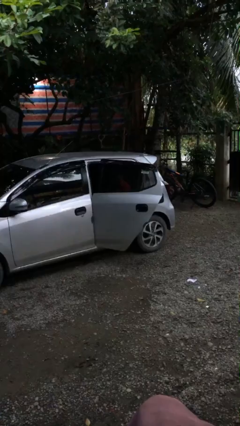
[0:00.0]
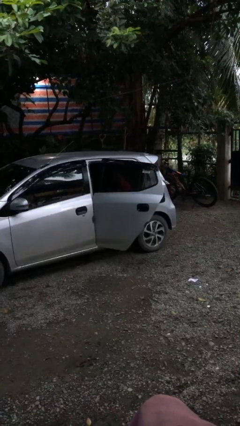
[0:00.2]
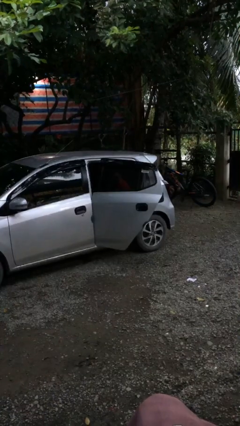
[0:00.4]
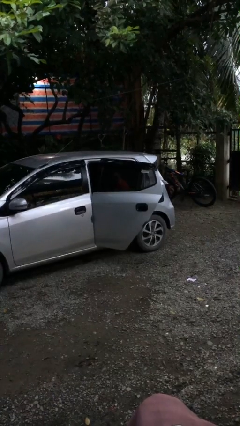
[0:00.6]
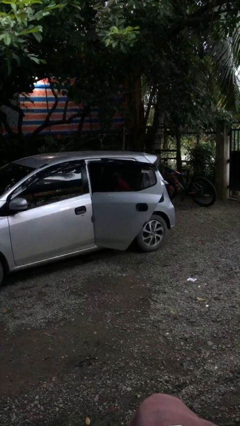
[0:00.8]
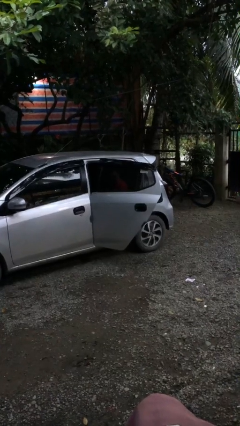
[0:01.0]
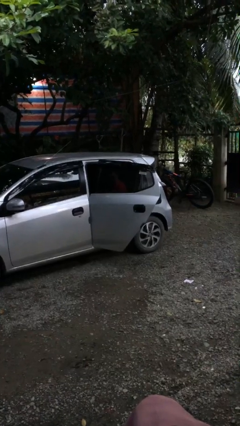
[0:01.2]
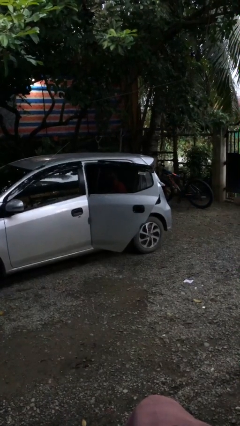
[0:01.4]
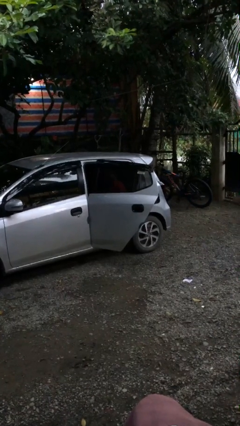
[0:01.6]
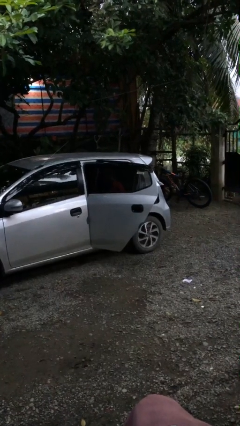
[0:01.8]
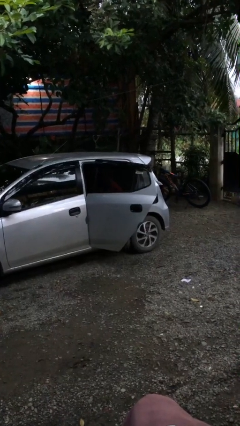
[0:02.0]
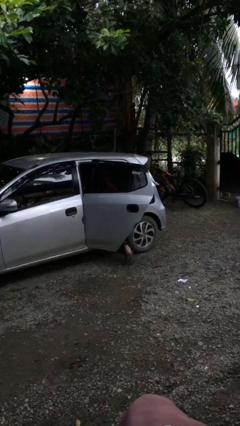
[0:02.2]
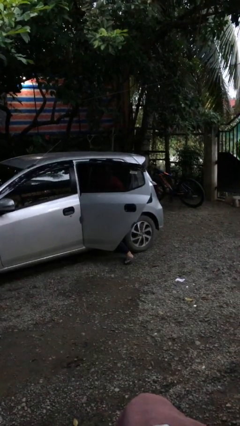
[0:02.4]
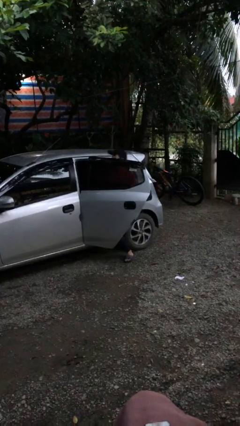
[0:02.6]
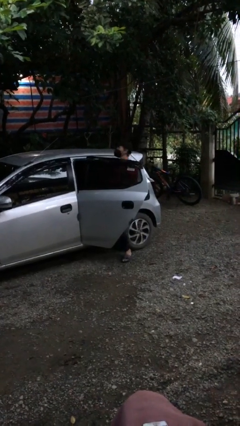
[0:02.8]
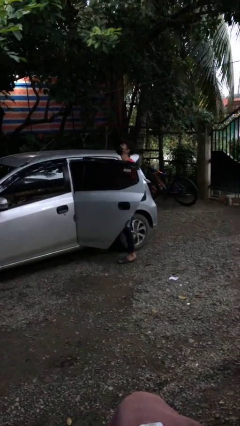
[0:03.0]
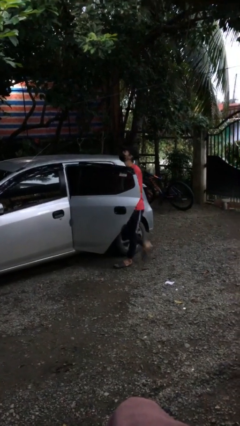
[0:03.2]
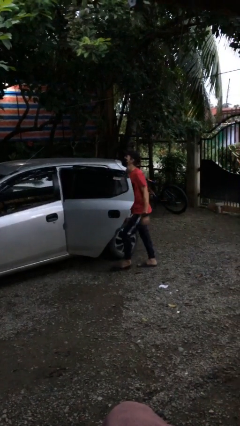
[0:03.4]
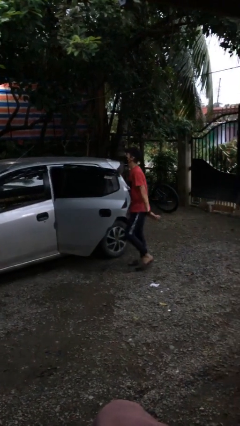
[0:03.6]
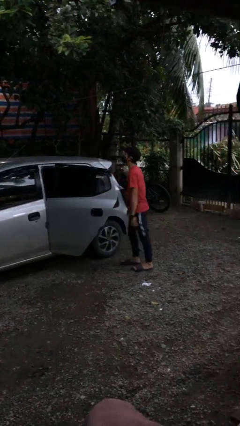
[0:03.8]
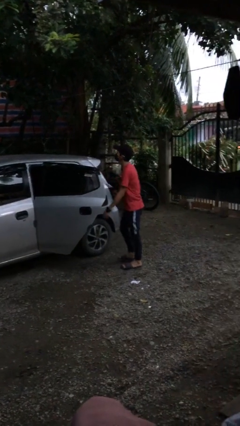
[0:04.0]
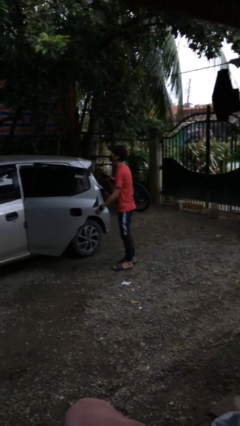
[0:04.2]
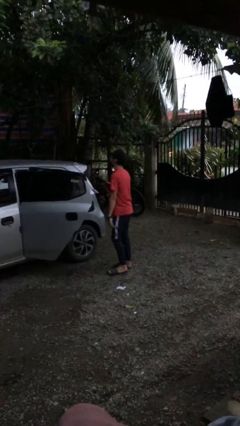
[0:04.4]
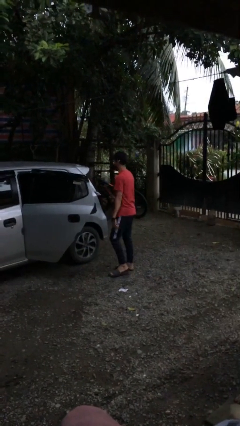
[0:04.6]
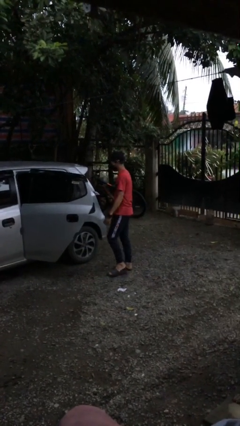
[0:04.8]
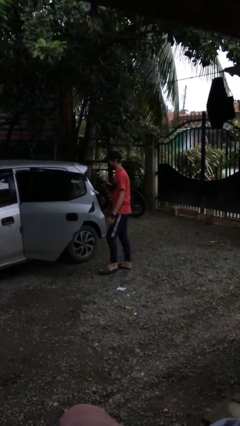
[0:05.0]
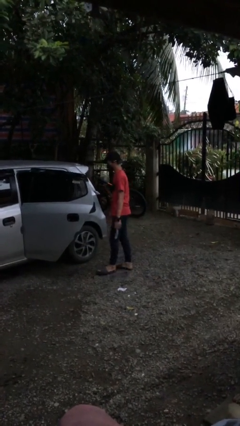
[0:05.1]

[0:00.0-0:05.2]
person exits car

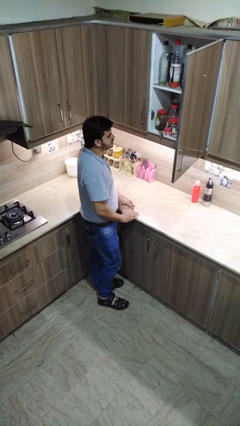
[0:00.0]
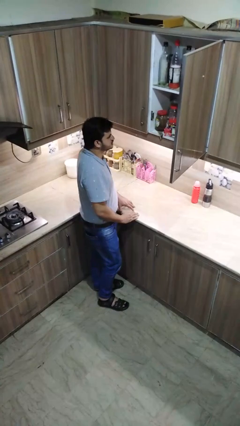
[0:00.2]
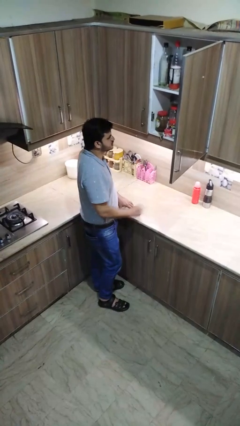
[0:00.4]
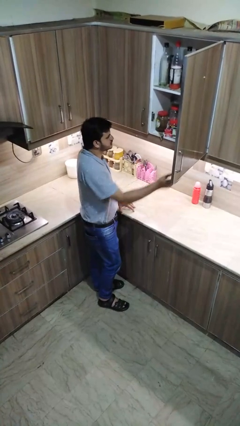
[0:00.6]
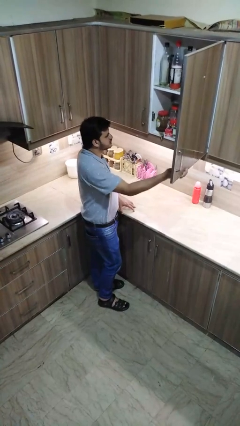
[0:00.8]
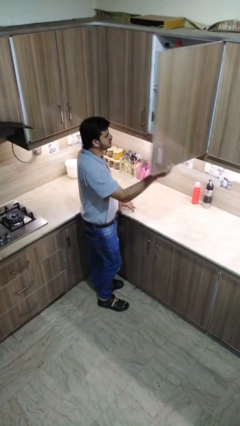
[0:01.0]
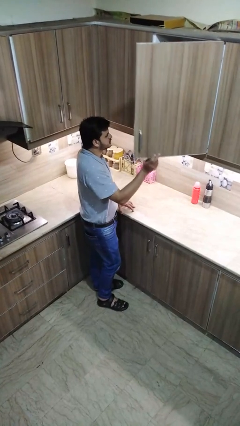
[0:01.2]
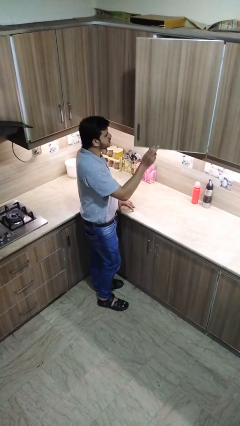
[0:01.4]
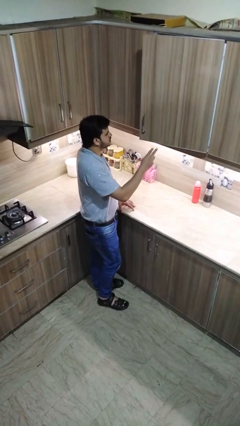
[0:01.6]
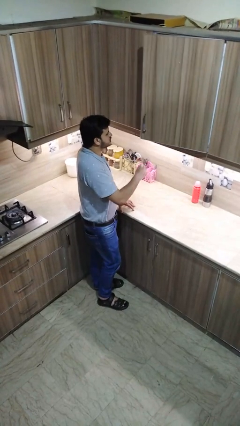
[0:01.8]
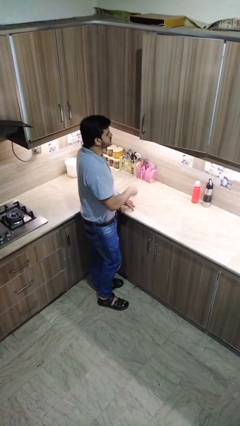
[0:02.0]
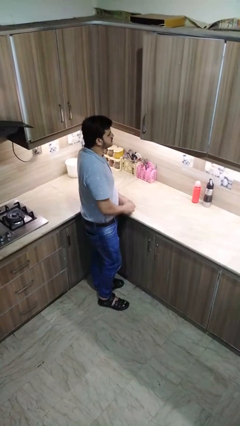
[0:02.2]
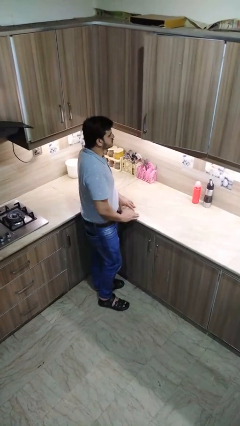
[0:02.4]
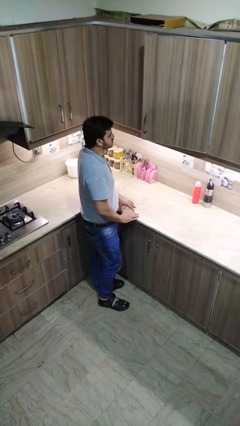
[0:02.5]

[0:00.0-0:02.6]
person closes cabinet

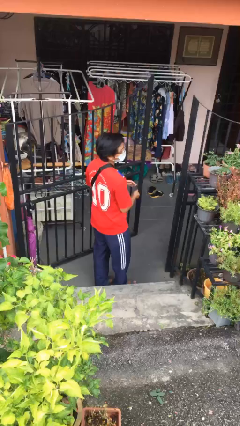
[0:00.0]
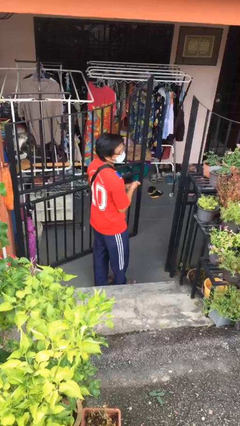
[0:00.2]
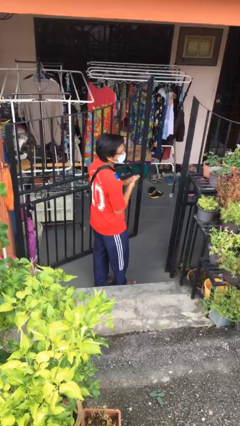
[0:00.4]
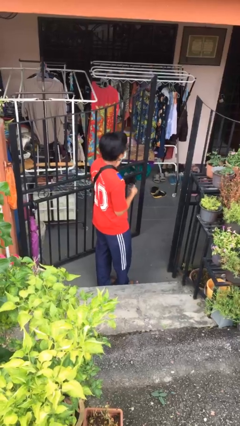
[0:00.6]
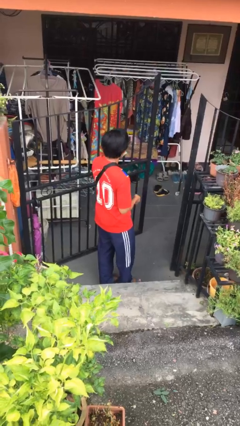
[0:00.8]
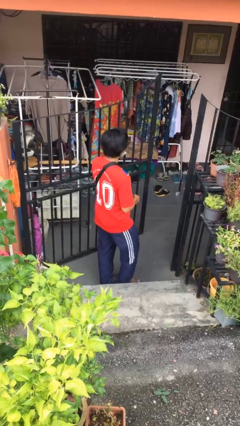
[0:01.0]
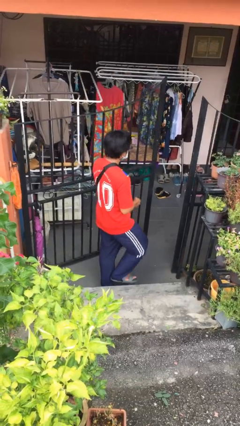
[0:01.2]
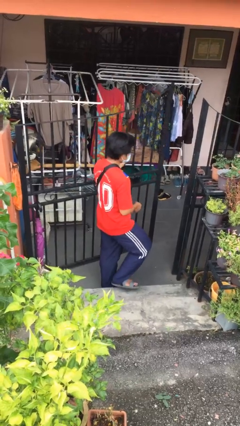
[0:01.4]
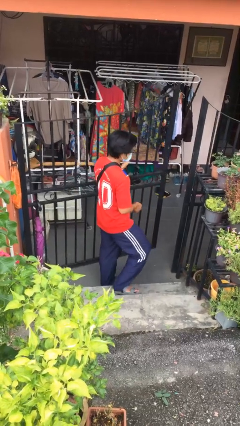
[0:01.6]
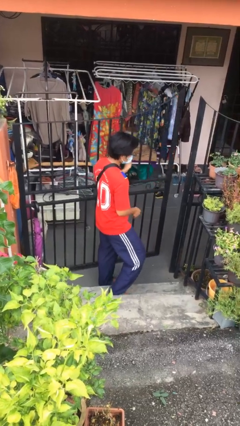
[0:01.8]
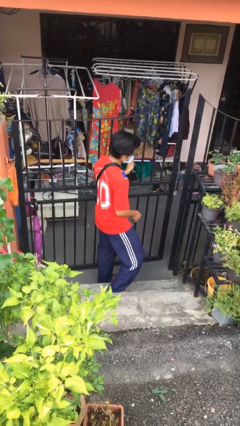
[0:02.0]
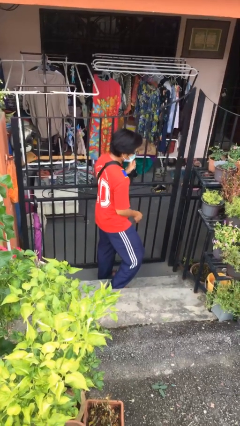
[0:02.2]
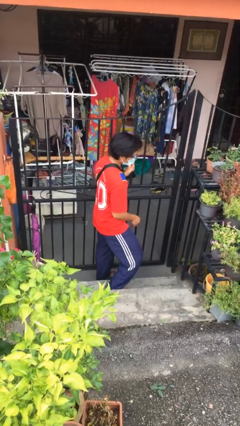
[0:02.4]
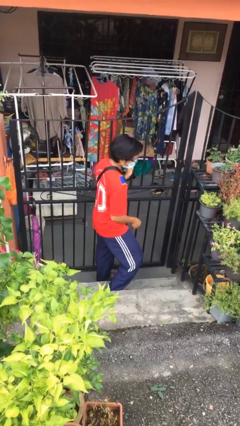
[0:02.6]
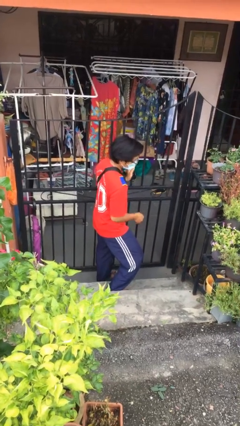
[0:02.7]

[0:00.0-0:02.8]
person closes facility door

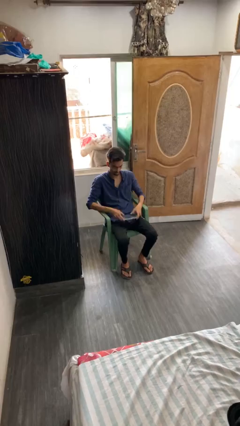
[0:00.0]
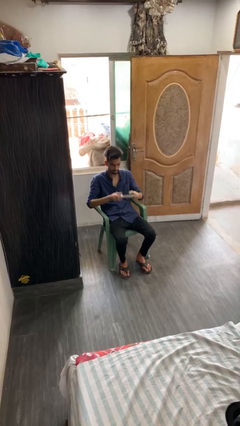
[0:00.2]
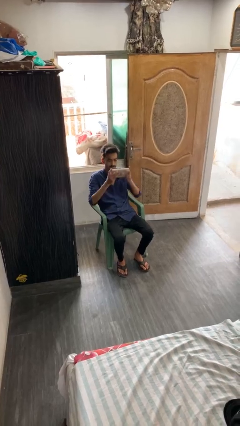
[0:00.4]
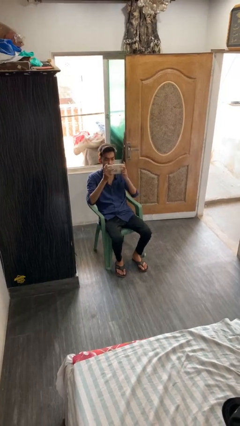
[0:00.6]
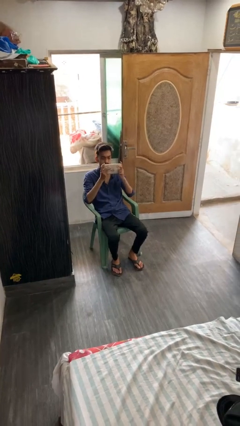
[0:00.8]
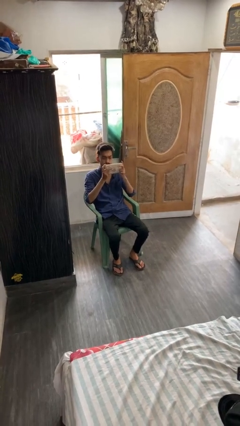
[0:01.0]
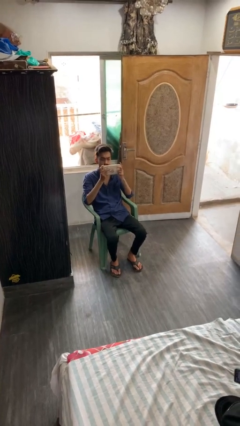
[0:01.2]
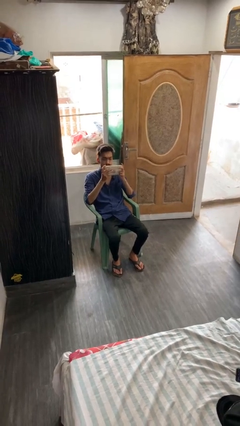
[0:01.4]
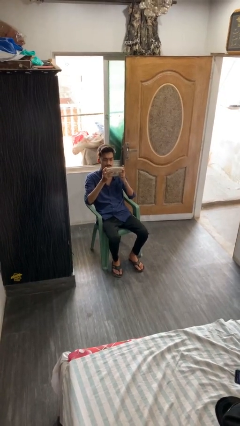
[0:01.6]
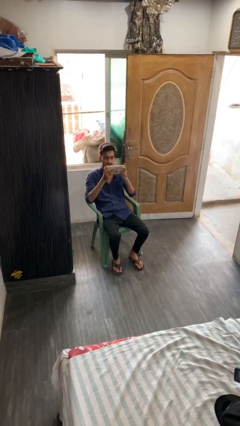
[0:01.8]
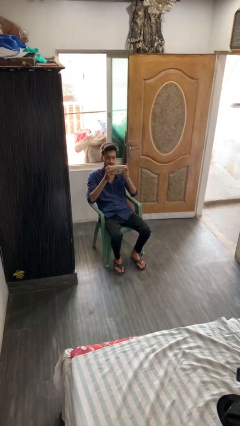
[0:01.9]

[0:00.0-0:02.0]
person interacts with tablet

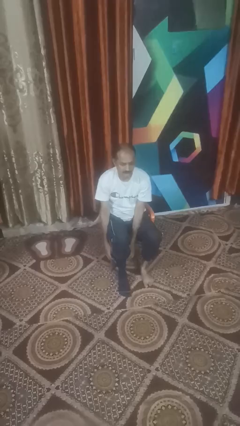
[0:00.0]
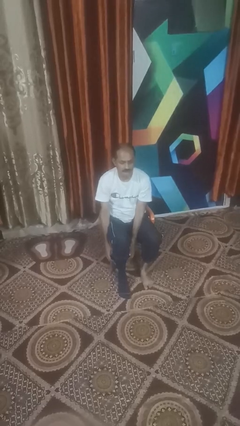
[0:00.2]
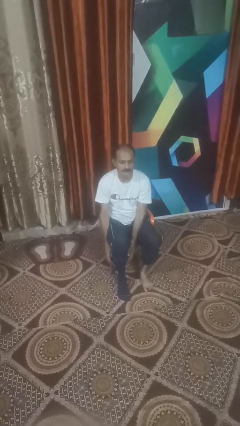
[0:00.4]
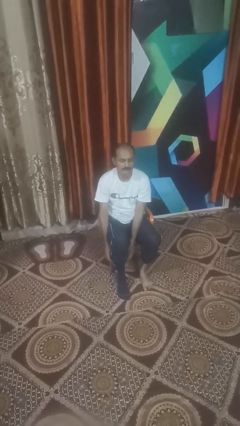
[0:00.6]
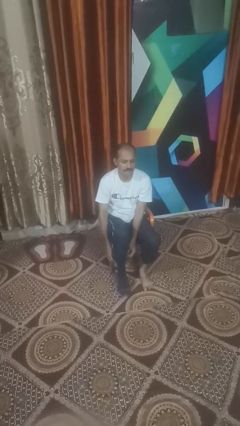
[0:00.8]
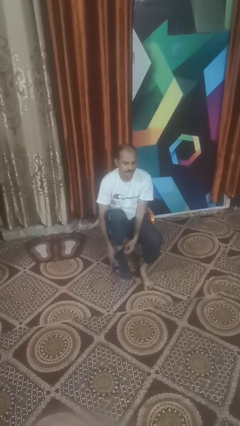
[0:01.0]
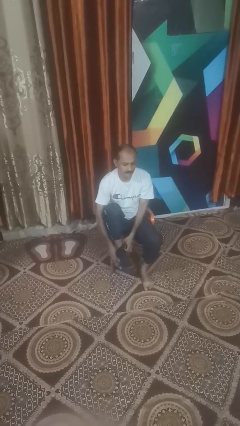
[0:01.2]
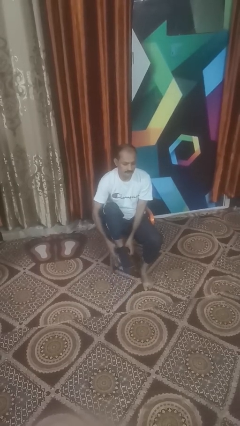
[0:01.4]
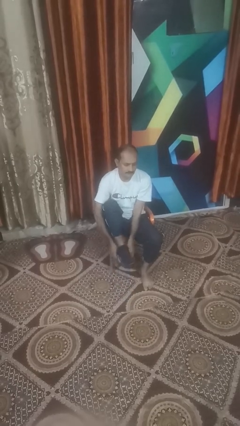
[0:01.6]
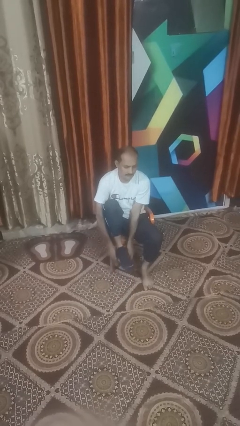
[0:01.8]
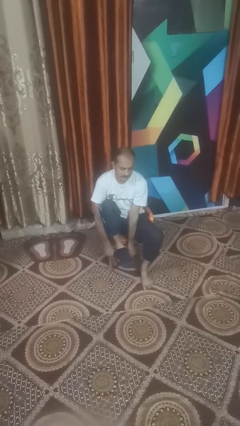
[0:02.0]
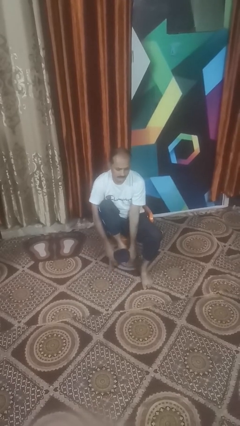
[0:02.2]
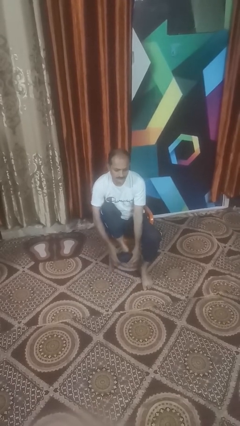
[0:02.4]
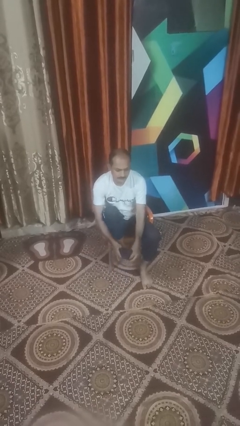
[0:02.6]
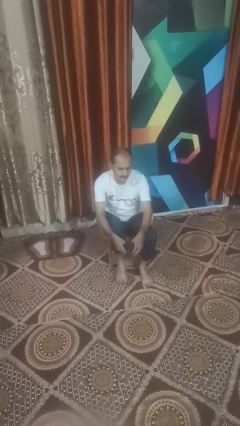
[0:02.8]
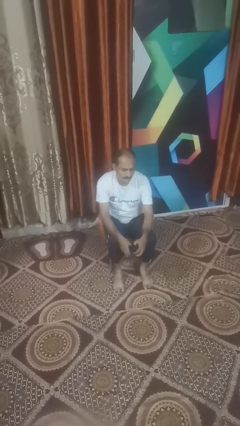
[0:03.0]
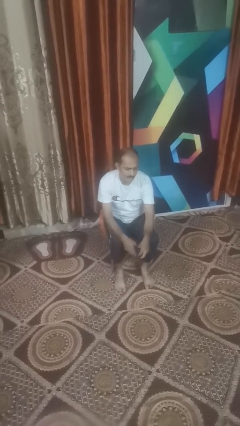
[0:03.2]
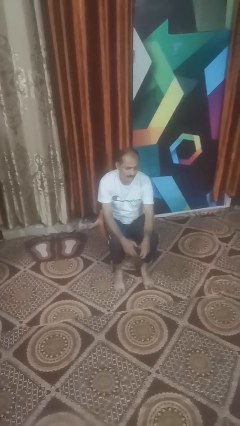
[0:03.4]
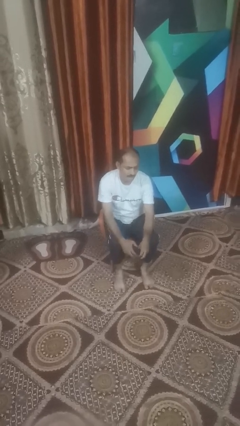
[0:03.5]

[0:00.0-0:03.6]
person takes off socks

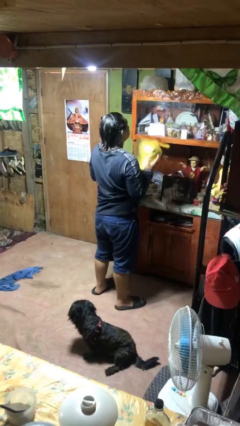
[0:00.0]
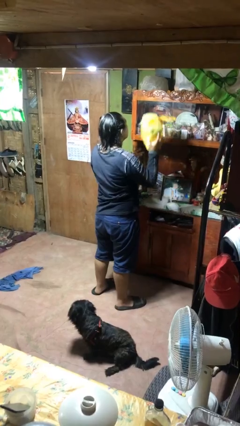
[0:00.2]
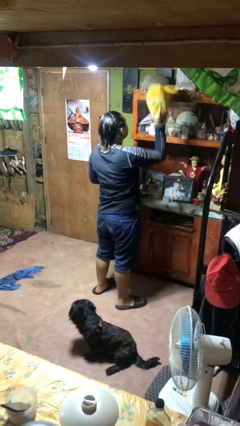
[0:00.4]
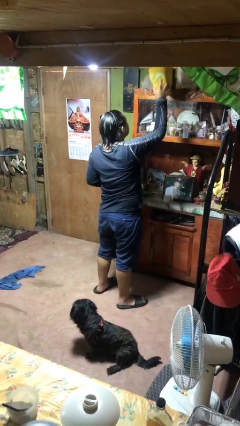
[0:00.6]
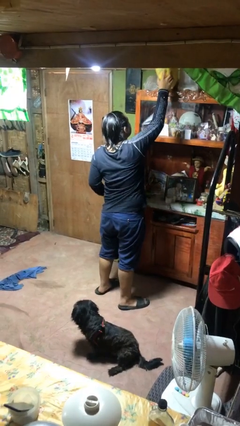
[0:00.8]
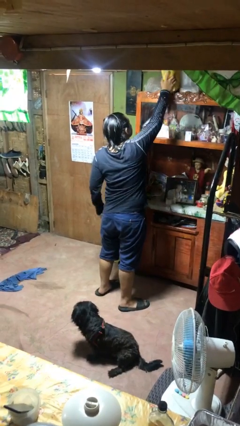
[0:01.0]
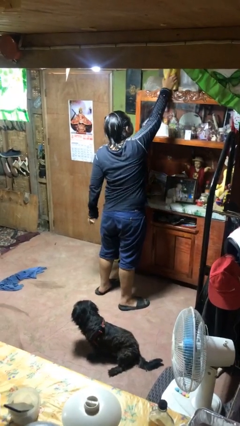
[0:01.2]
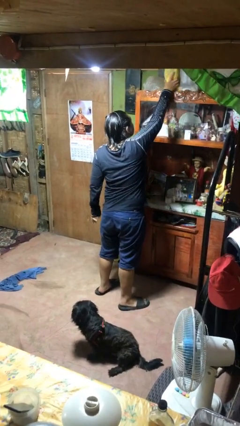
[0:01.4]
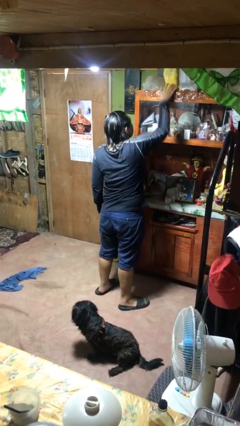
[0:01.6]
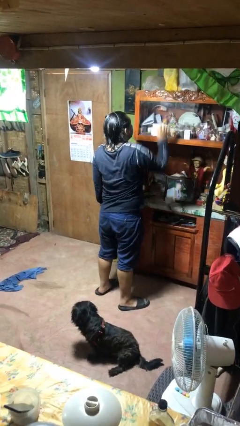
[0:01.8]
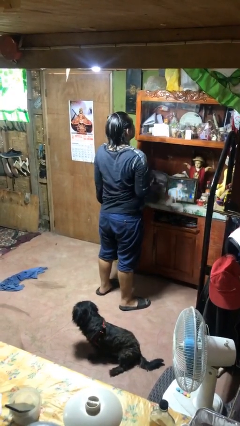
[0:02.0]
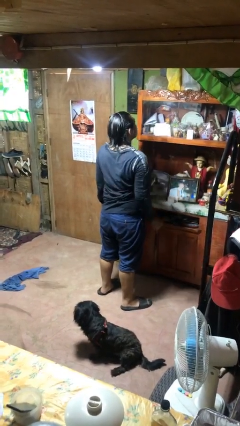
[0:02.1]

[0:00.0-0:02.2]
person puts down object on shelf
